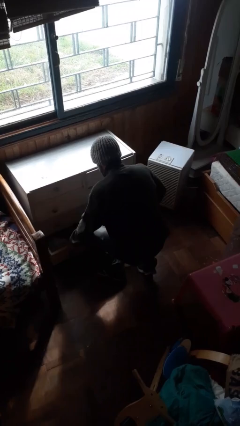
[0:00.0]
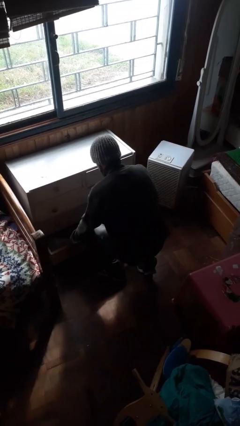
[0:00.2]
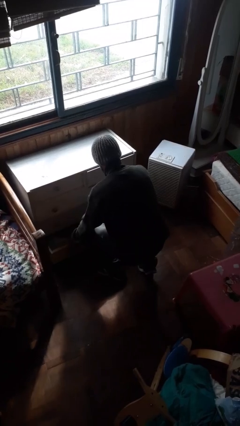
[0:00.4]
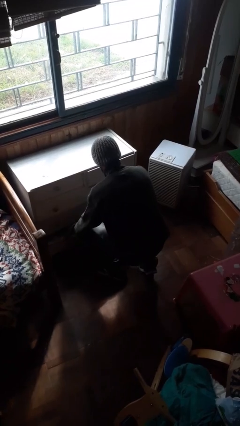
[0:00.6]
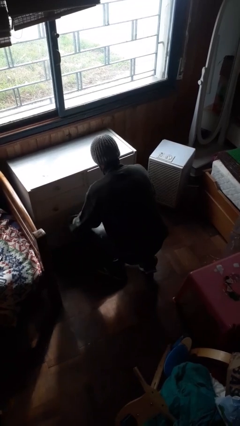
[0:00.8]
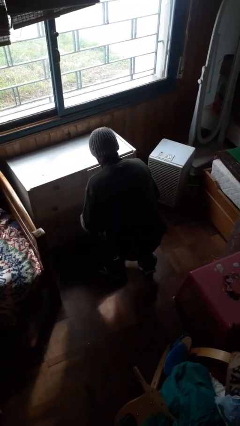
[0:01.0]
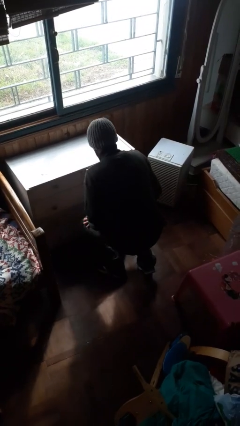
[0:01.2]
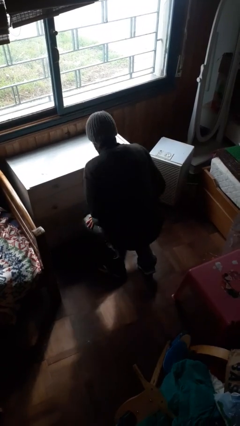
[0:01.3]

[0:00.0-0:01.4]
person closes dresser drawer

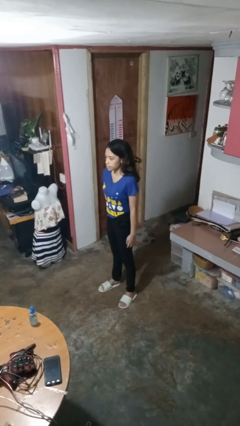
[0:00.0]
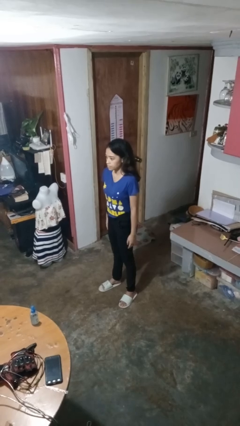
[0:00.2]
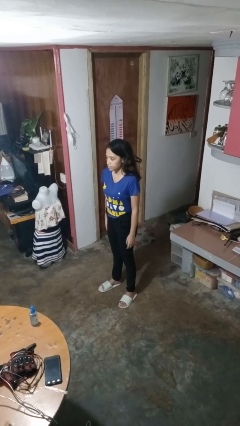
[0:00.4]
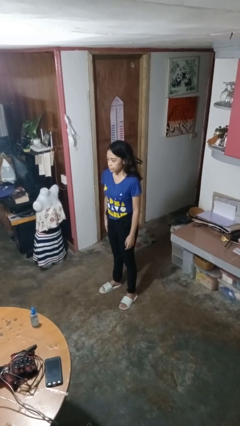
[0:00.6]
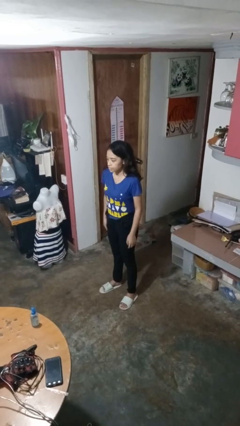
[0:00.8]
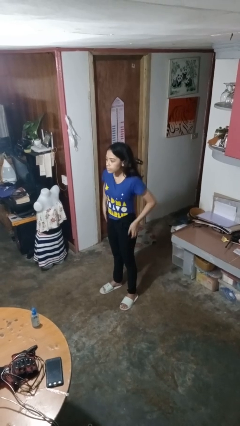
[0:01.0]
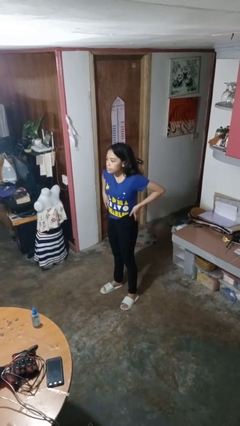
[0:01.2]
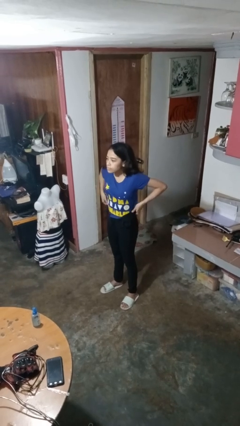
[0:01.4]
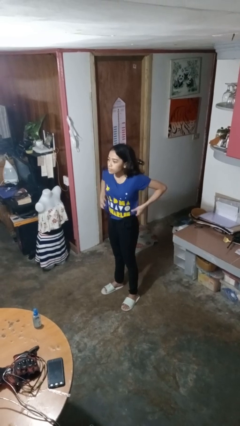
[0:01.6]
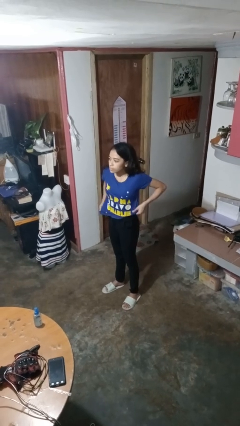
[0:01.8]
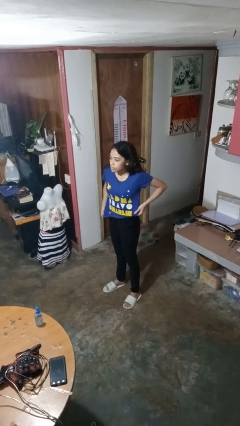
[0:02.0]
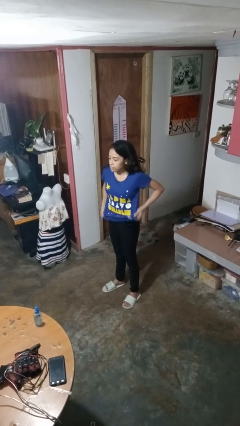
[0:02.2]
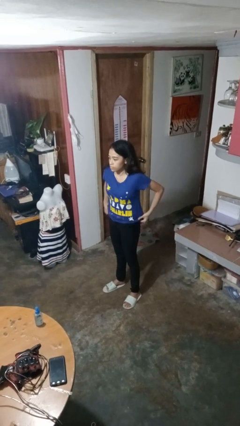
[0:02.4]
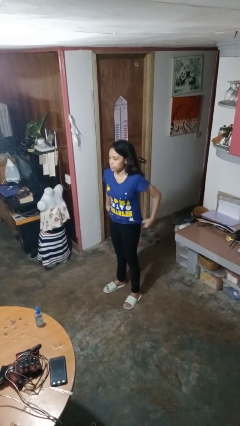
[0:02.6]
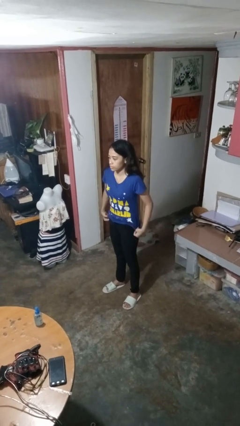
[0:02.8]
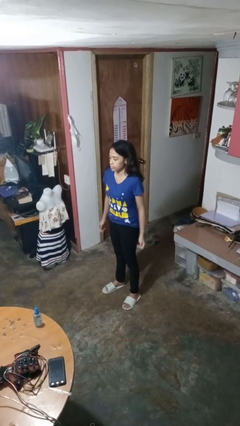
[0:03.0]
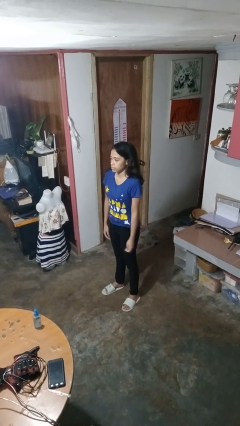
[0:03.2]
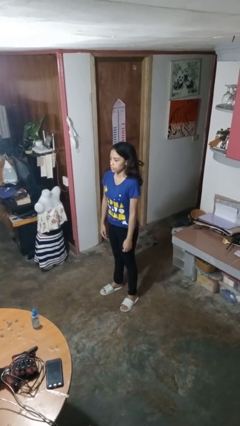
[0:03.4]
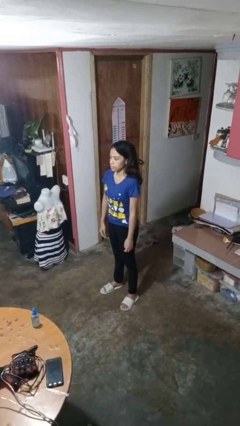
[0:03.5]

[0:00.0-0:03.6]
person untucks shirt

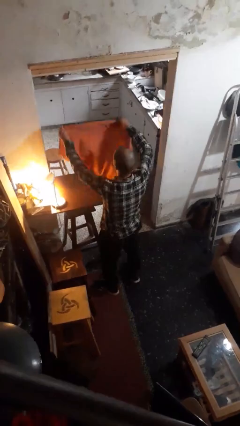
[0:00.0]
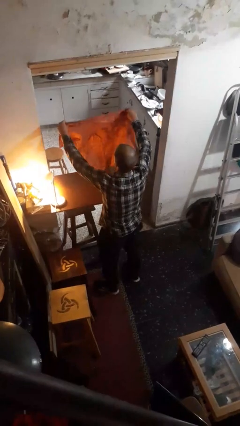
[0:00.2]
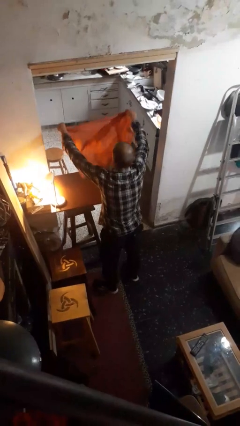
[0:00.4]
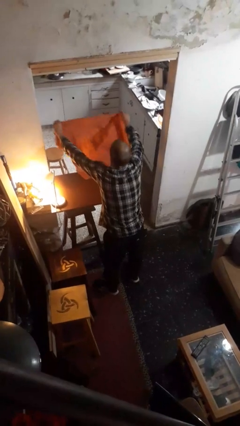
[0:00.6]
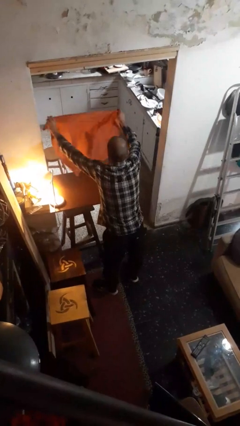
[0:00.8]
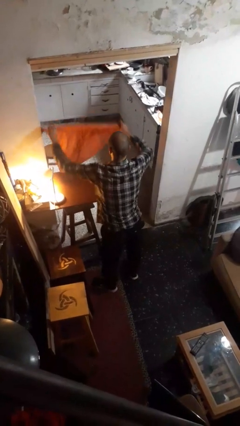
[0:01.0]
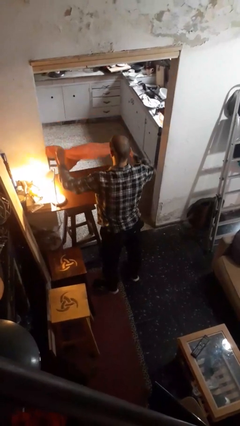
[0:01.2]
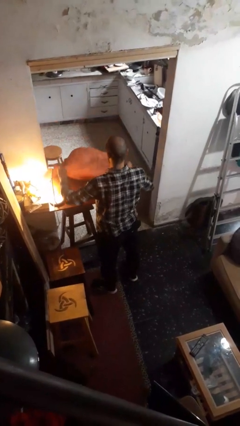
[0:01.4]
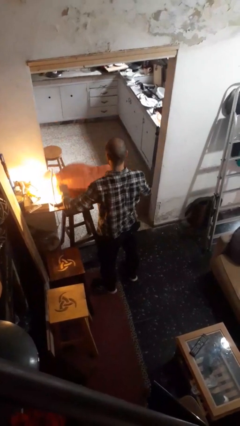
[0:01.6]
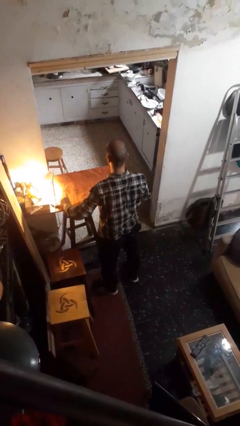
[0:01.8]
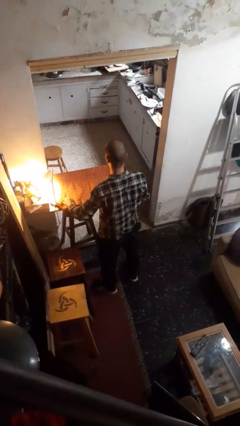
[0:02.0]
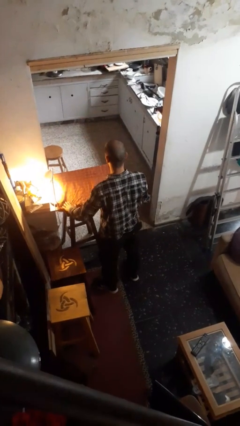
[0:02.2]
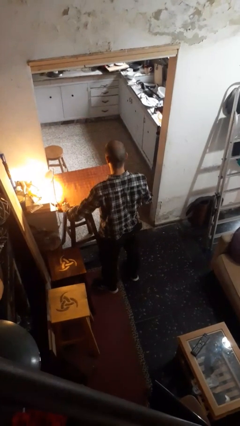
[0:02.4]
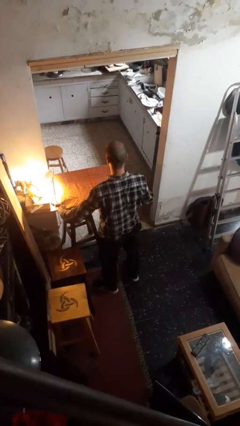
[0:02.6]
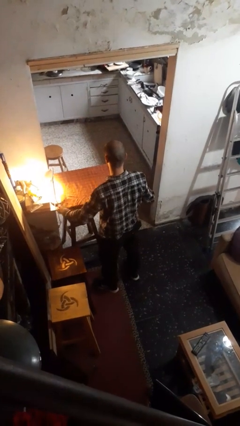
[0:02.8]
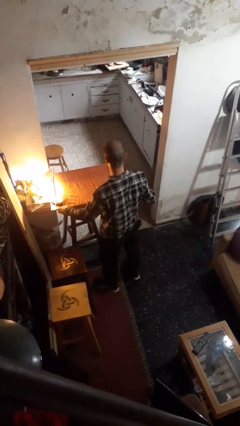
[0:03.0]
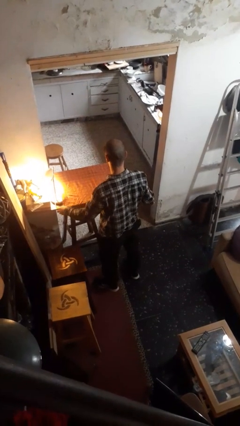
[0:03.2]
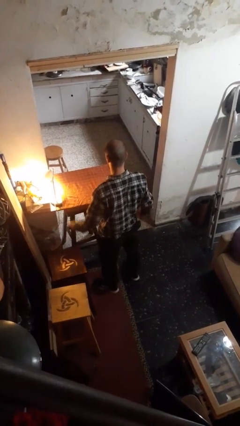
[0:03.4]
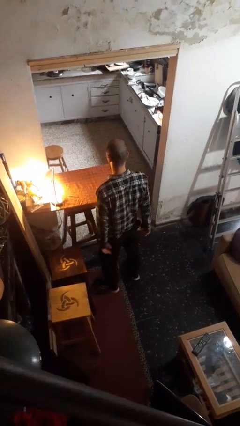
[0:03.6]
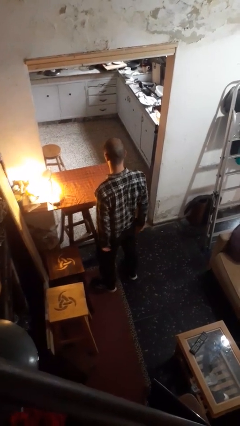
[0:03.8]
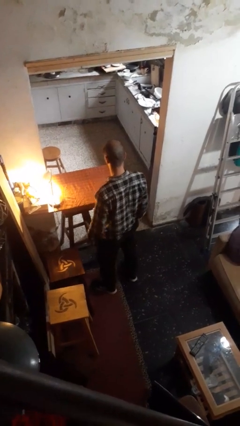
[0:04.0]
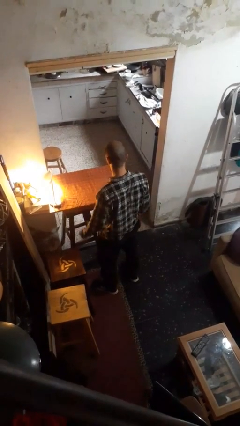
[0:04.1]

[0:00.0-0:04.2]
person spreads tablecloth

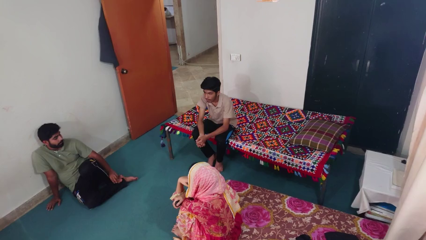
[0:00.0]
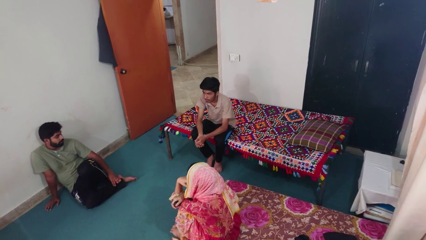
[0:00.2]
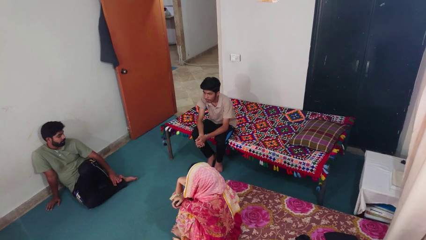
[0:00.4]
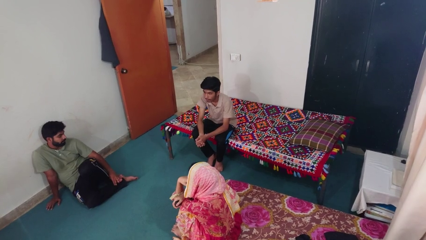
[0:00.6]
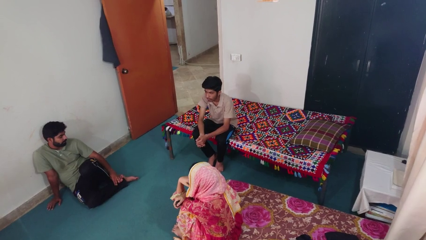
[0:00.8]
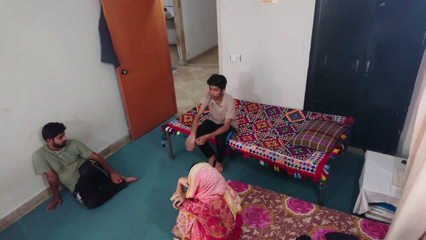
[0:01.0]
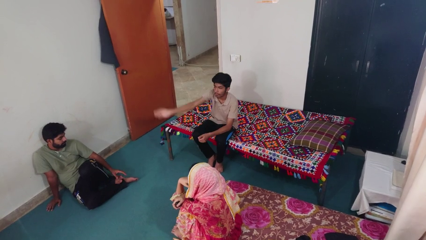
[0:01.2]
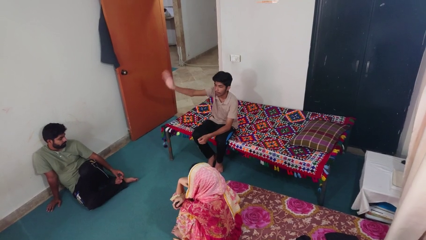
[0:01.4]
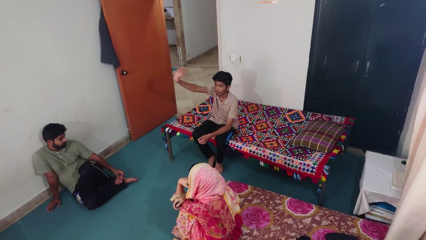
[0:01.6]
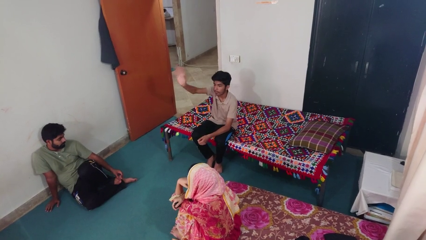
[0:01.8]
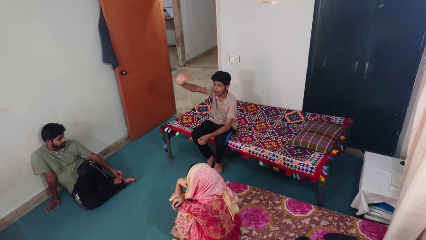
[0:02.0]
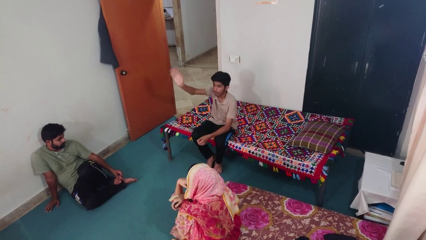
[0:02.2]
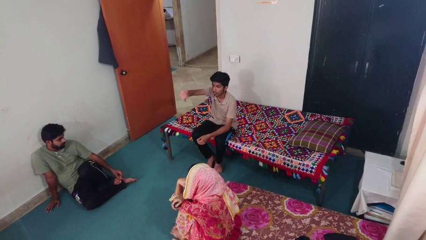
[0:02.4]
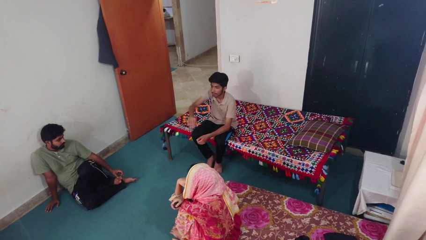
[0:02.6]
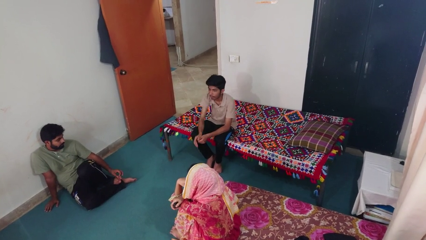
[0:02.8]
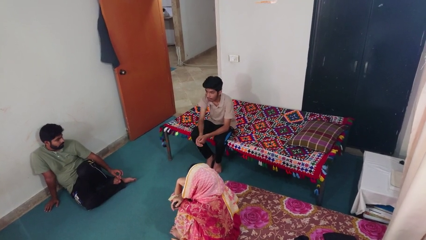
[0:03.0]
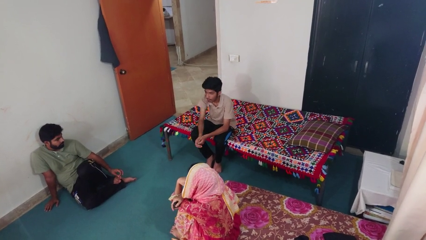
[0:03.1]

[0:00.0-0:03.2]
person waves at person

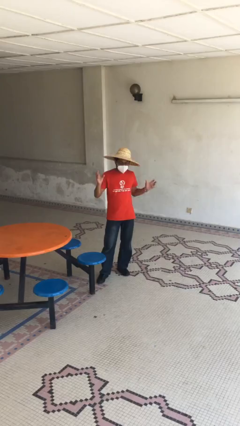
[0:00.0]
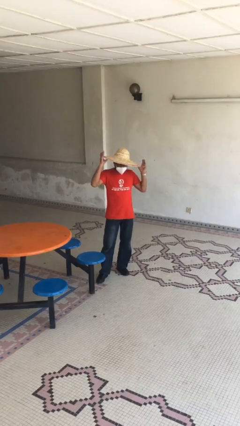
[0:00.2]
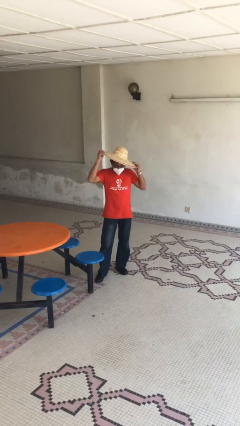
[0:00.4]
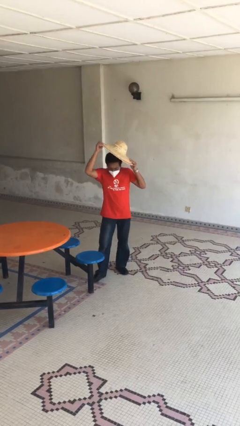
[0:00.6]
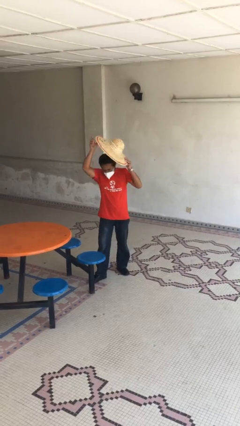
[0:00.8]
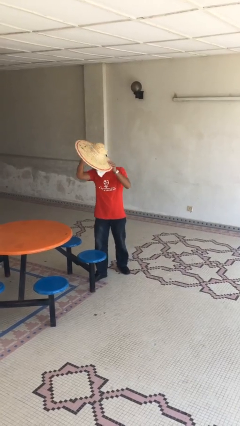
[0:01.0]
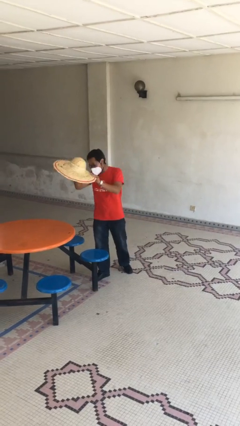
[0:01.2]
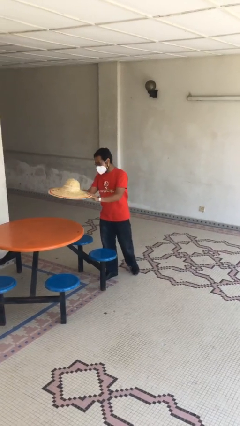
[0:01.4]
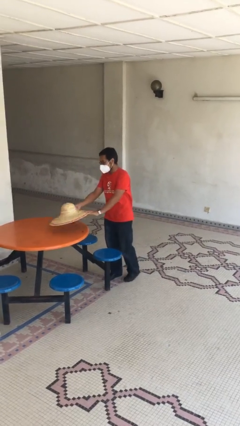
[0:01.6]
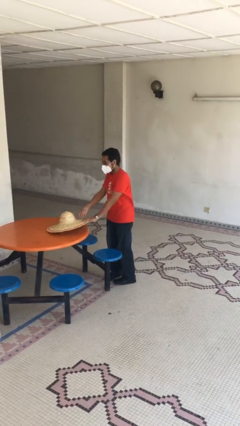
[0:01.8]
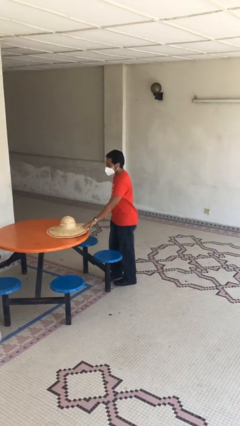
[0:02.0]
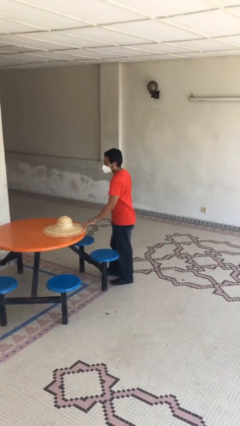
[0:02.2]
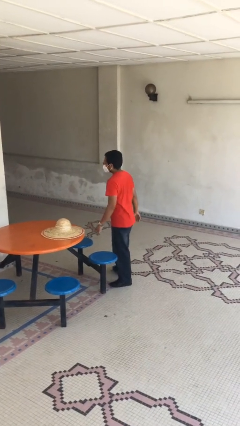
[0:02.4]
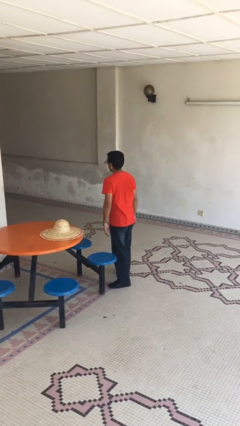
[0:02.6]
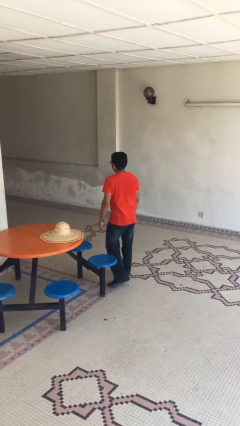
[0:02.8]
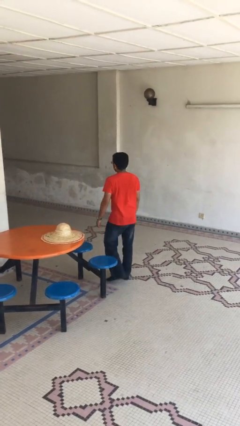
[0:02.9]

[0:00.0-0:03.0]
person puts down object on table

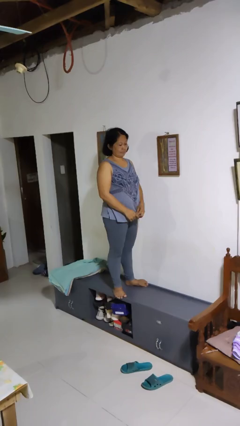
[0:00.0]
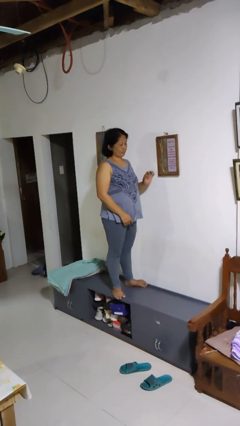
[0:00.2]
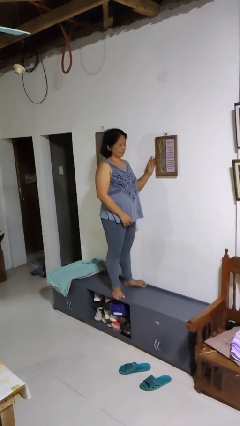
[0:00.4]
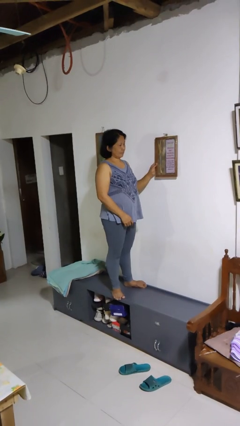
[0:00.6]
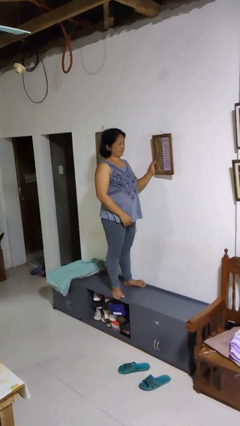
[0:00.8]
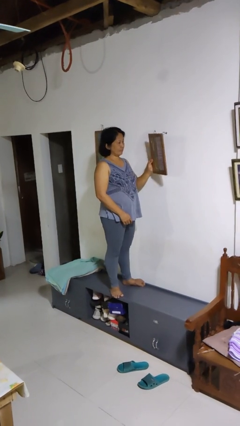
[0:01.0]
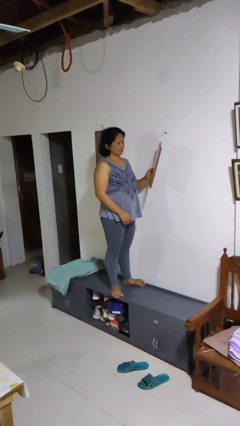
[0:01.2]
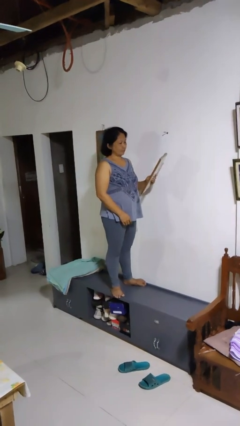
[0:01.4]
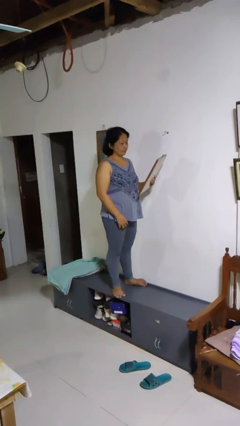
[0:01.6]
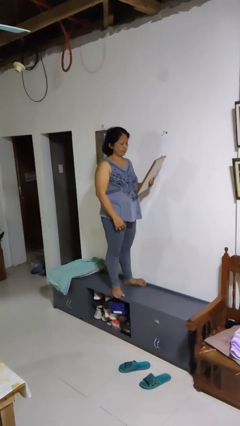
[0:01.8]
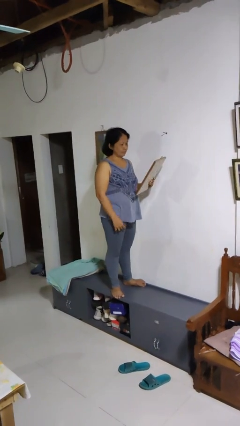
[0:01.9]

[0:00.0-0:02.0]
person takes down picture frame
